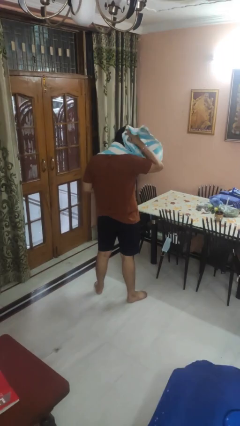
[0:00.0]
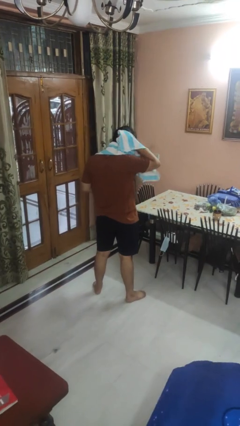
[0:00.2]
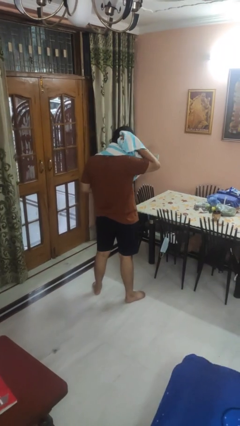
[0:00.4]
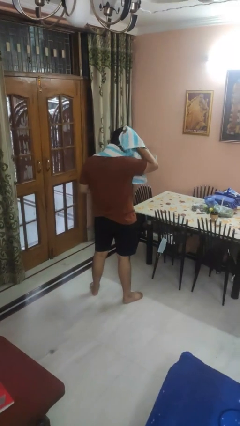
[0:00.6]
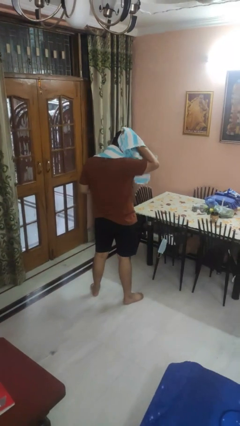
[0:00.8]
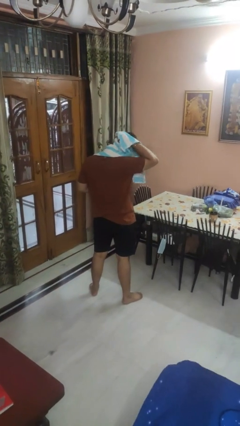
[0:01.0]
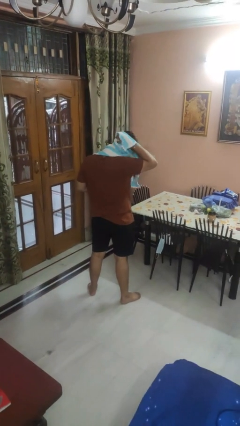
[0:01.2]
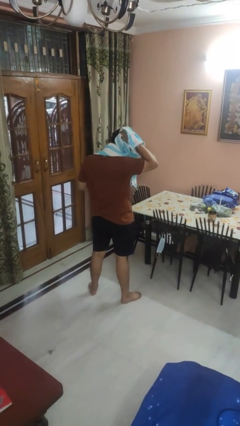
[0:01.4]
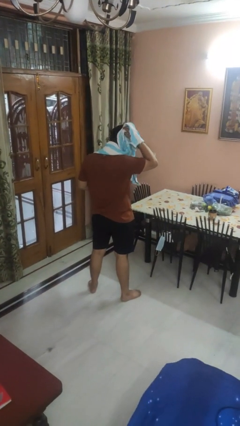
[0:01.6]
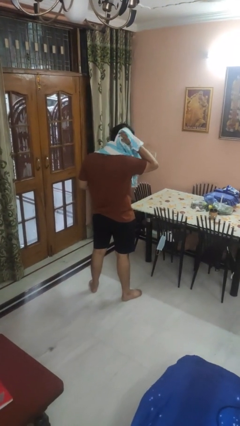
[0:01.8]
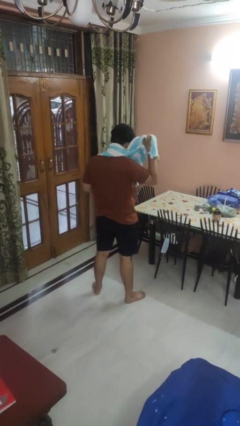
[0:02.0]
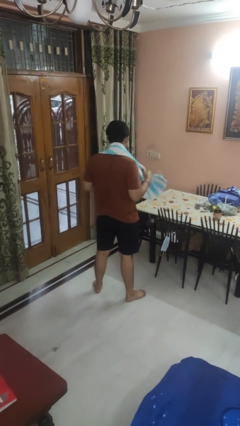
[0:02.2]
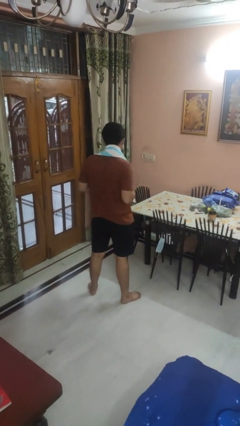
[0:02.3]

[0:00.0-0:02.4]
person dries hair with towel

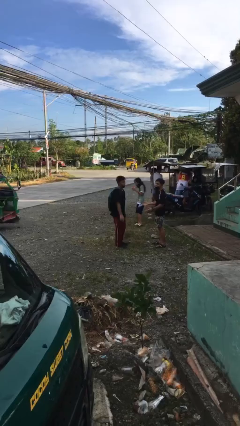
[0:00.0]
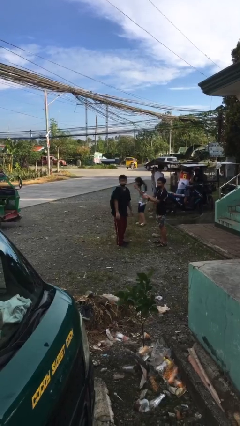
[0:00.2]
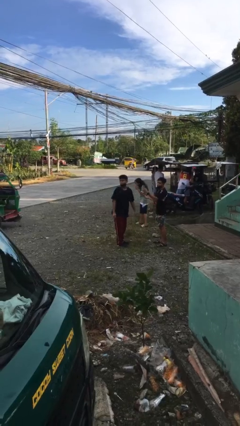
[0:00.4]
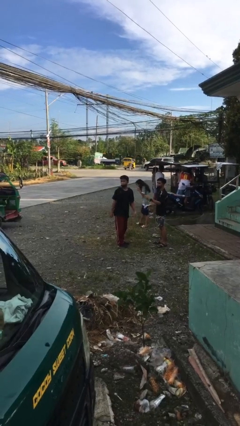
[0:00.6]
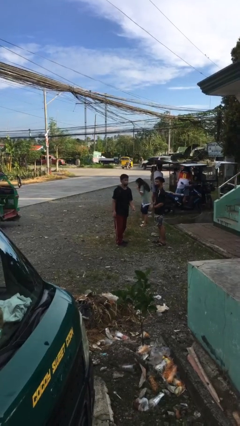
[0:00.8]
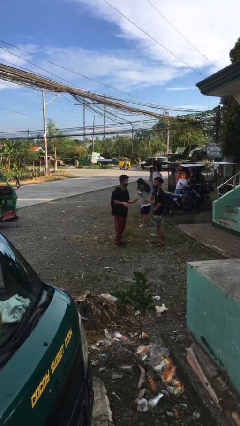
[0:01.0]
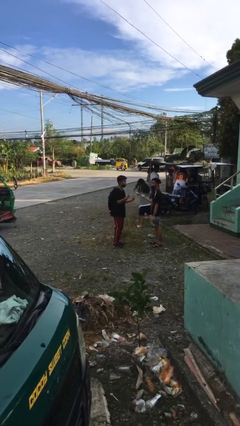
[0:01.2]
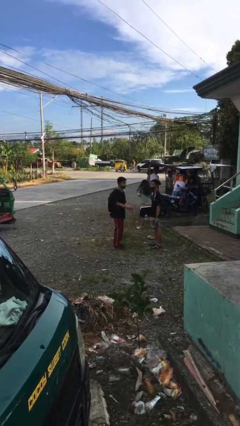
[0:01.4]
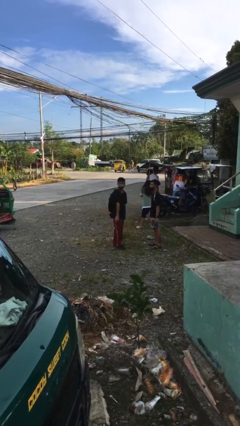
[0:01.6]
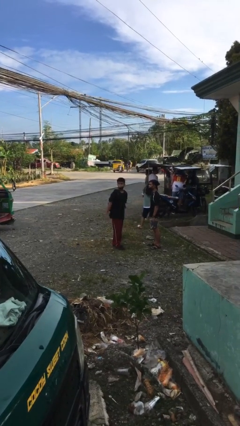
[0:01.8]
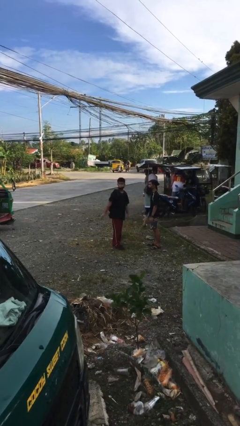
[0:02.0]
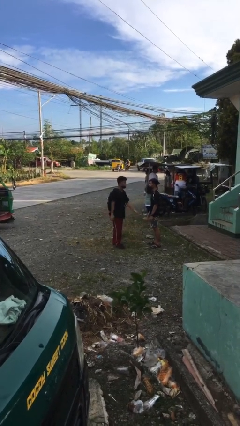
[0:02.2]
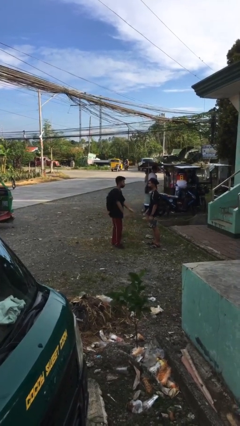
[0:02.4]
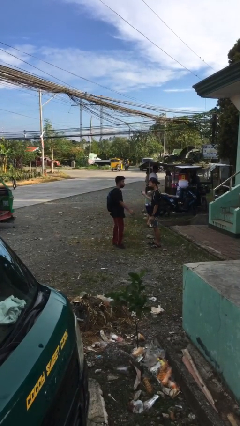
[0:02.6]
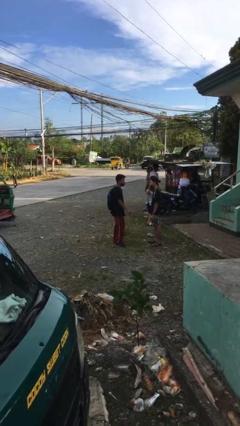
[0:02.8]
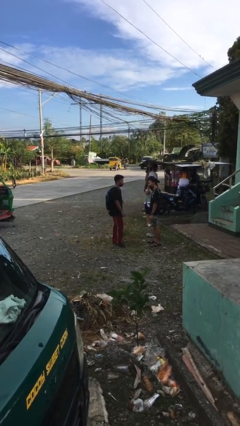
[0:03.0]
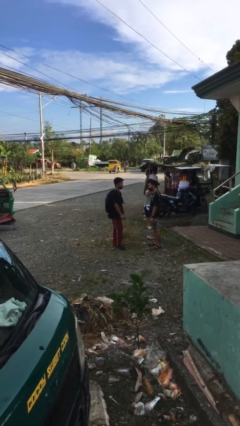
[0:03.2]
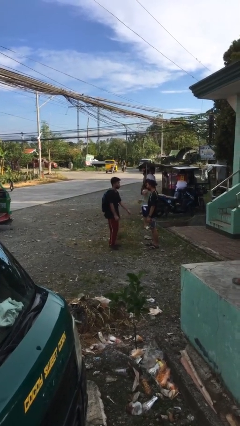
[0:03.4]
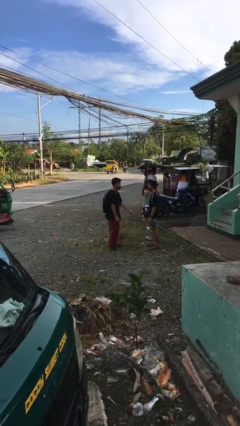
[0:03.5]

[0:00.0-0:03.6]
person talks to person

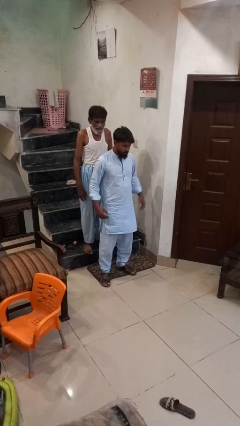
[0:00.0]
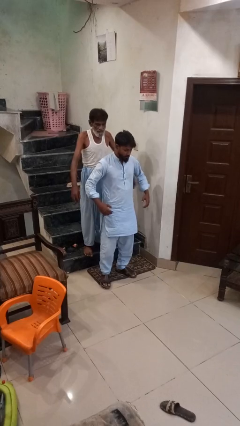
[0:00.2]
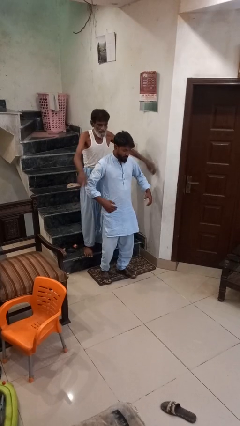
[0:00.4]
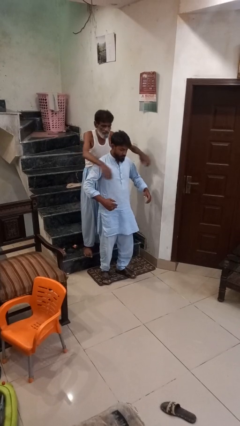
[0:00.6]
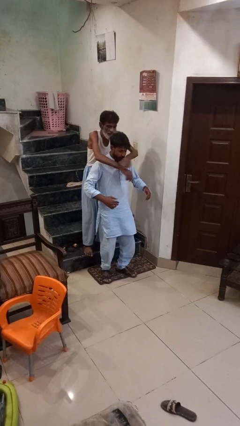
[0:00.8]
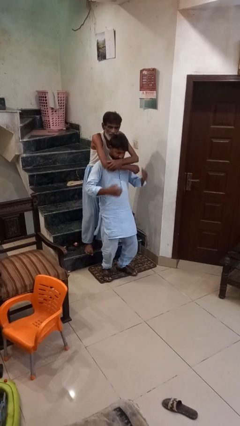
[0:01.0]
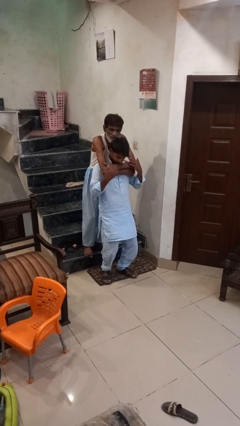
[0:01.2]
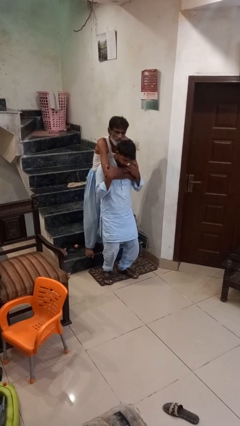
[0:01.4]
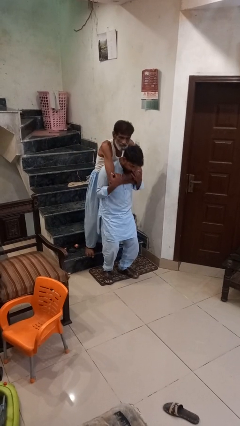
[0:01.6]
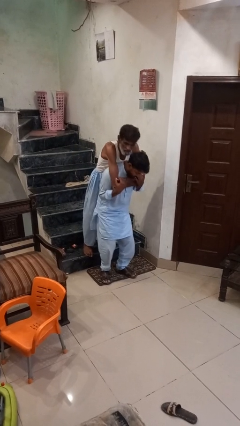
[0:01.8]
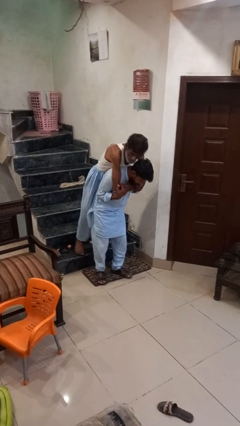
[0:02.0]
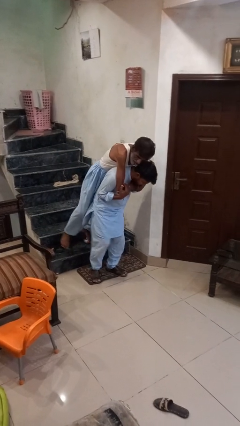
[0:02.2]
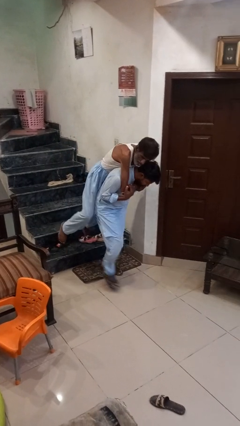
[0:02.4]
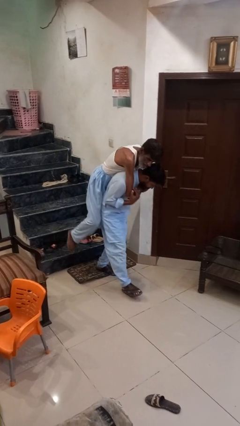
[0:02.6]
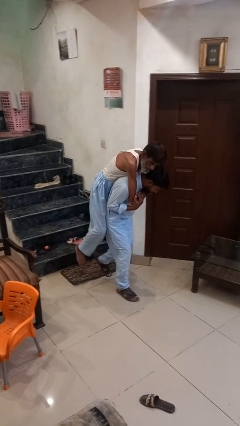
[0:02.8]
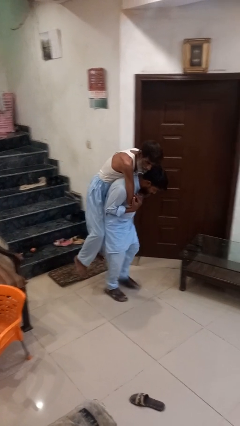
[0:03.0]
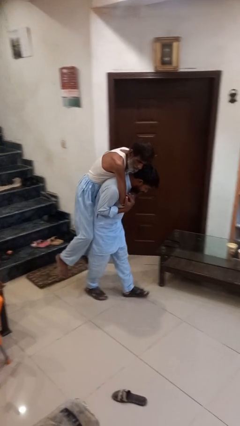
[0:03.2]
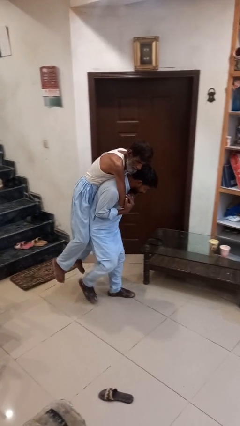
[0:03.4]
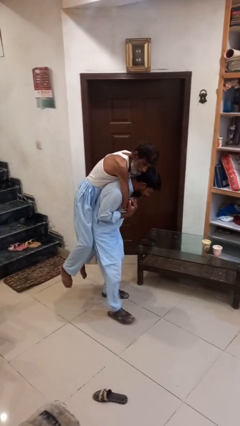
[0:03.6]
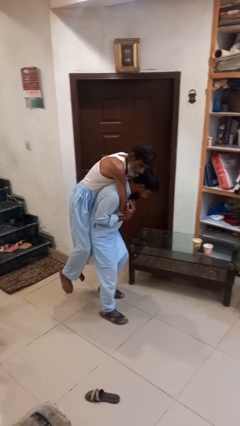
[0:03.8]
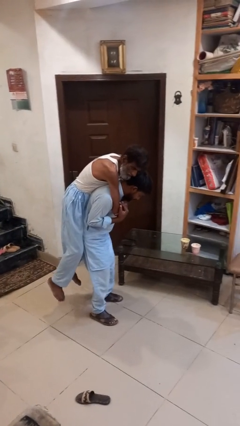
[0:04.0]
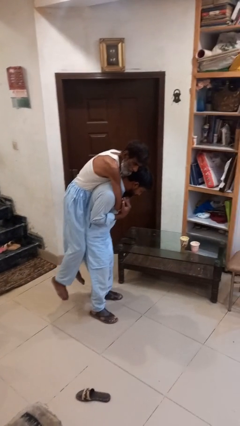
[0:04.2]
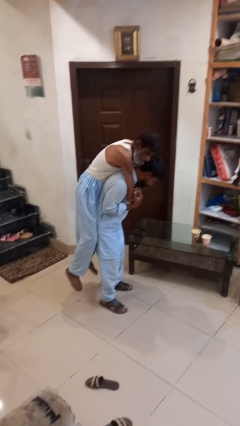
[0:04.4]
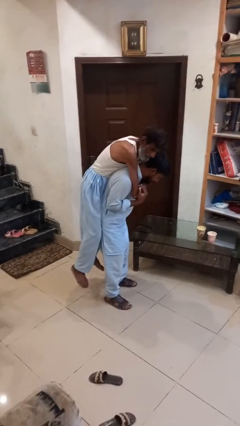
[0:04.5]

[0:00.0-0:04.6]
person carries person over shoulder

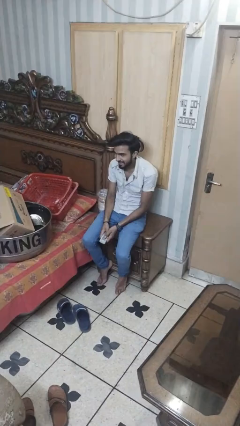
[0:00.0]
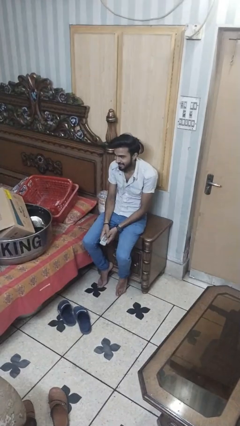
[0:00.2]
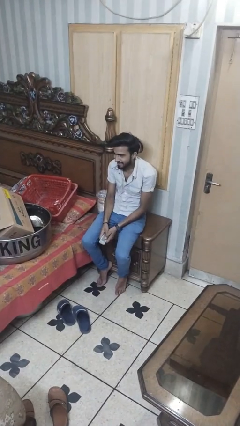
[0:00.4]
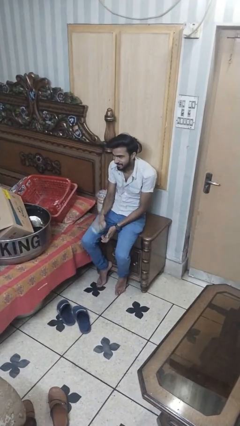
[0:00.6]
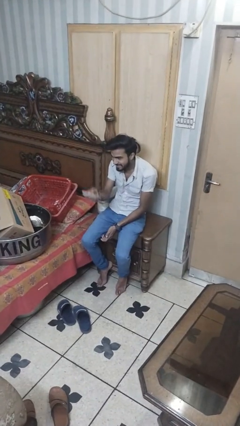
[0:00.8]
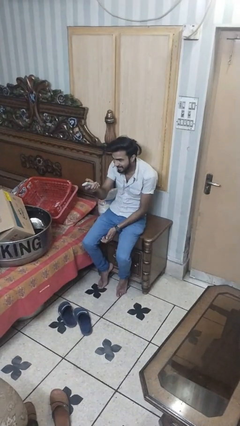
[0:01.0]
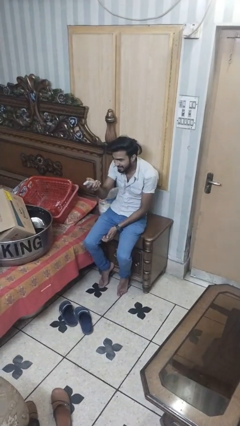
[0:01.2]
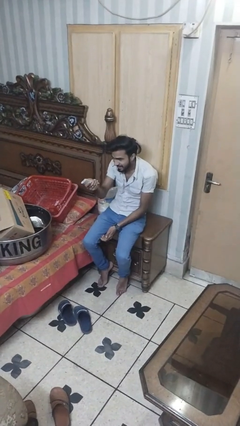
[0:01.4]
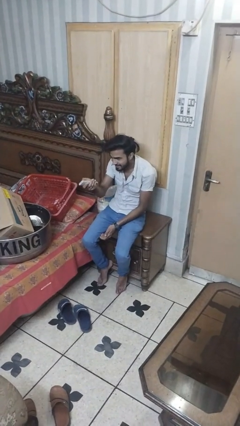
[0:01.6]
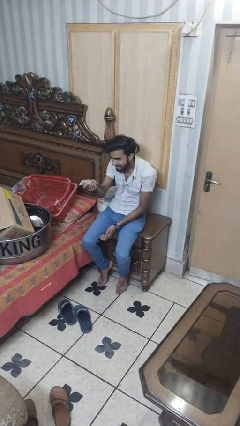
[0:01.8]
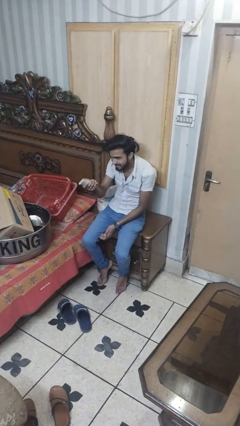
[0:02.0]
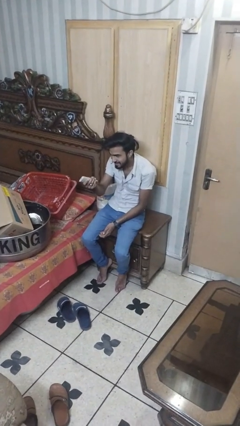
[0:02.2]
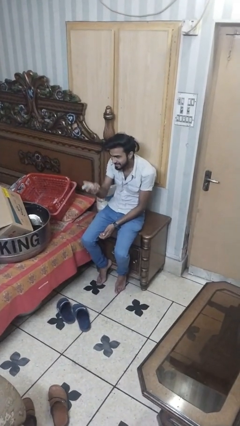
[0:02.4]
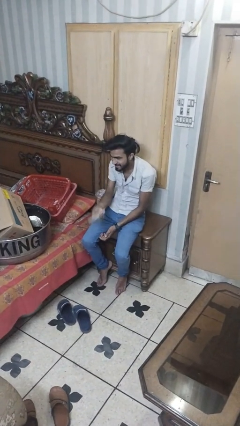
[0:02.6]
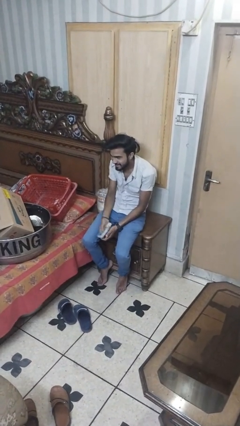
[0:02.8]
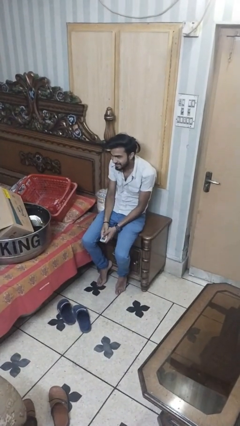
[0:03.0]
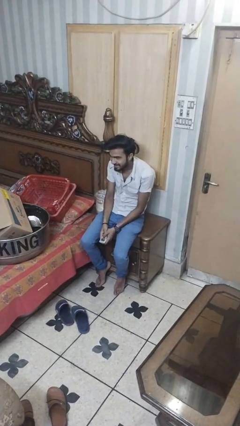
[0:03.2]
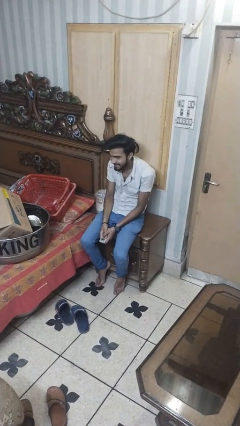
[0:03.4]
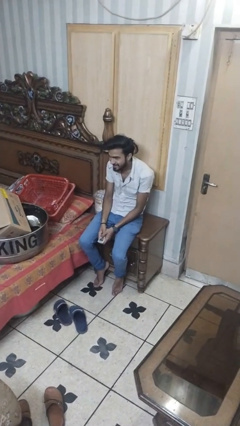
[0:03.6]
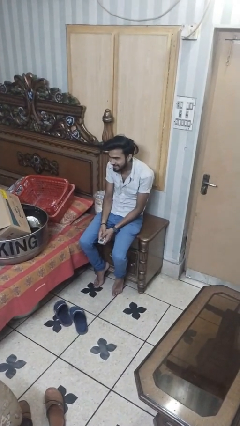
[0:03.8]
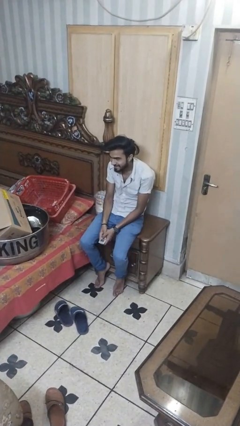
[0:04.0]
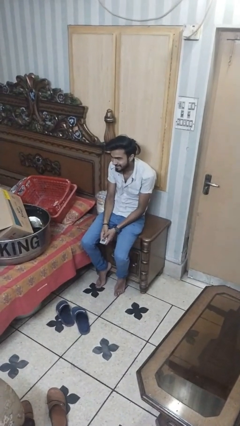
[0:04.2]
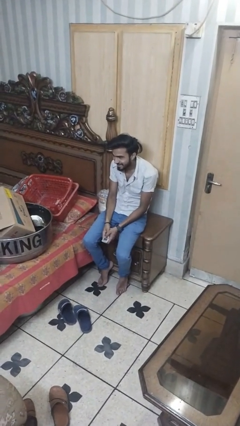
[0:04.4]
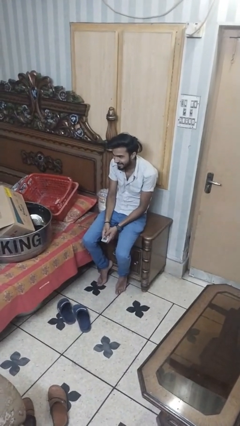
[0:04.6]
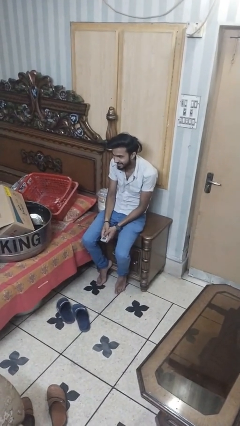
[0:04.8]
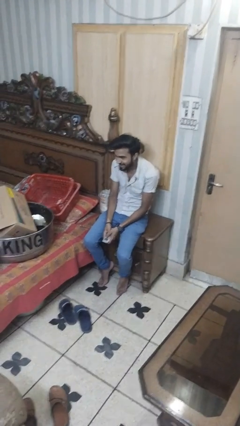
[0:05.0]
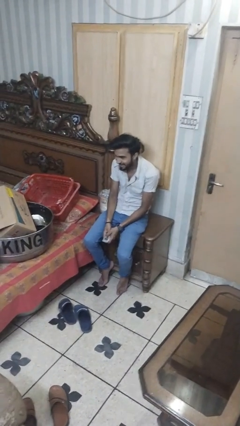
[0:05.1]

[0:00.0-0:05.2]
person uses television remote

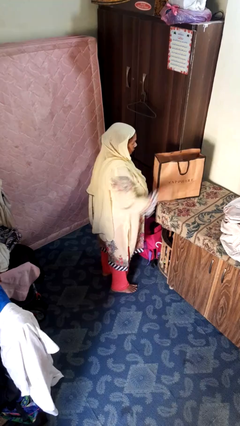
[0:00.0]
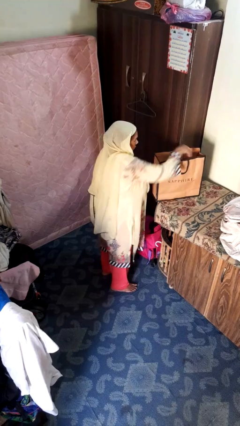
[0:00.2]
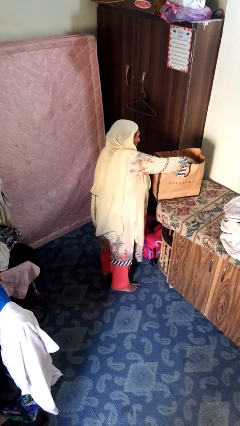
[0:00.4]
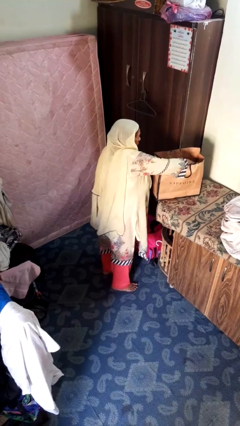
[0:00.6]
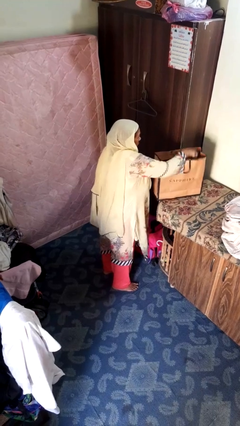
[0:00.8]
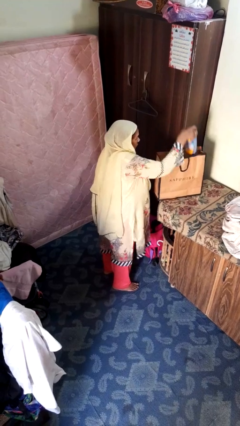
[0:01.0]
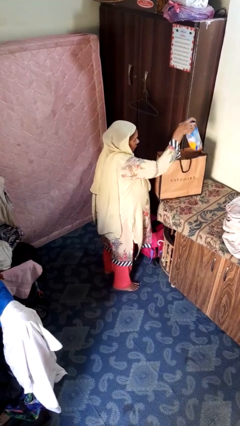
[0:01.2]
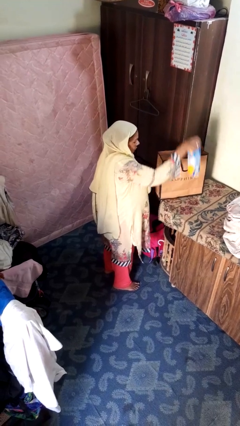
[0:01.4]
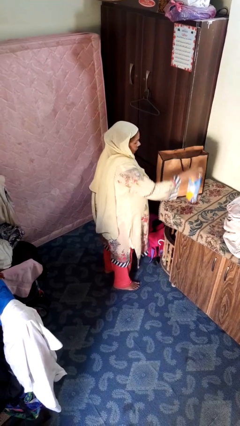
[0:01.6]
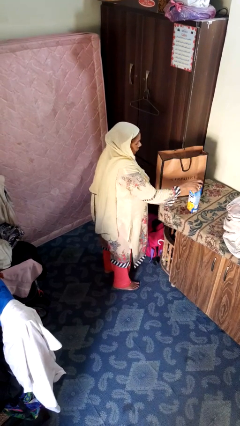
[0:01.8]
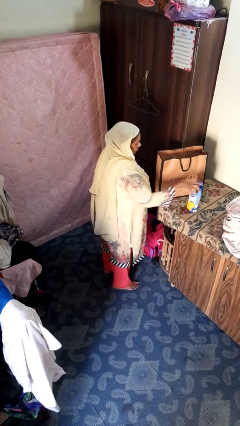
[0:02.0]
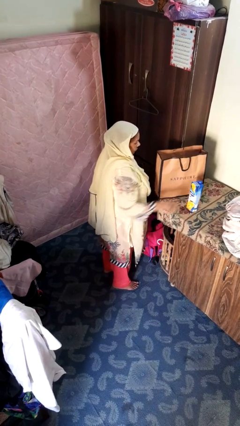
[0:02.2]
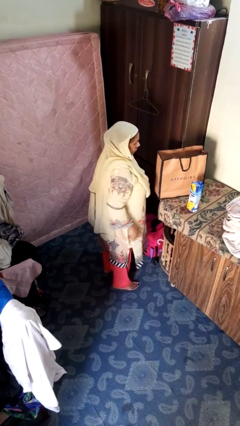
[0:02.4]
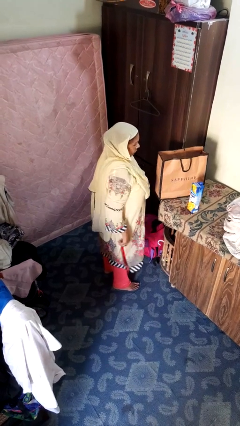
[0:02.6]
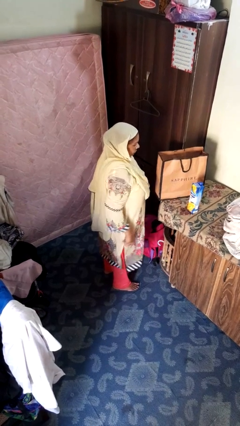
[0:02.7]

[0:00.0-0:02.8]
person takes object from bag
